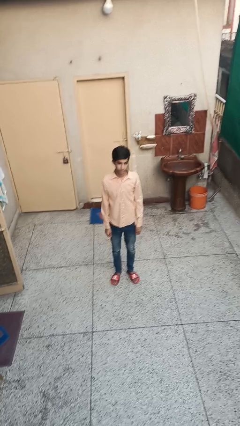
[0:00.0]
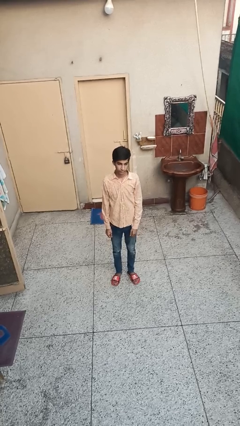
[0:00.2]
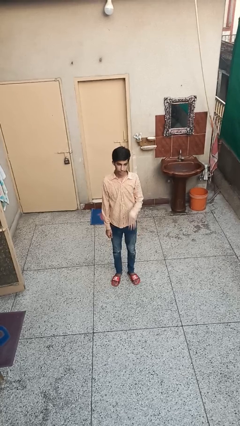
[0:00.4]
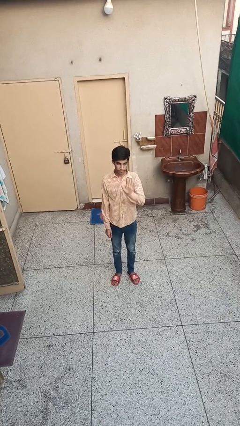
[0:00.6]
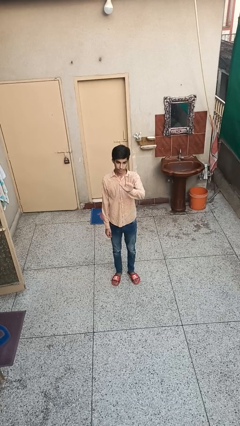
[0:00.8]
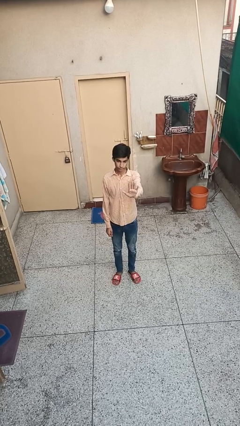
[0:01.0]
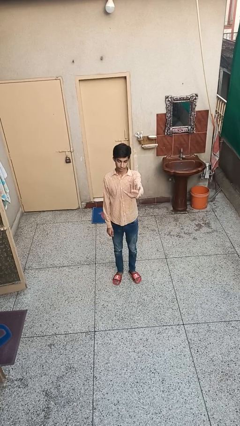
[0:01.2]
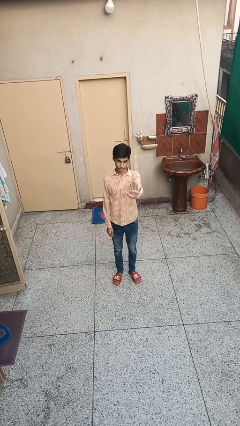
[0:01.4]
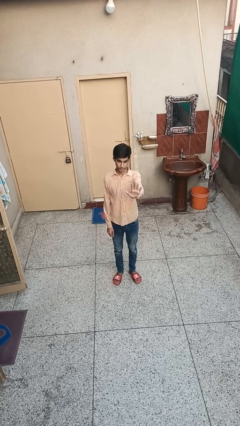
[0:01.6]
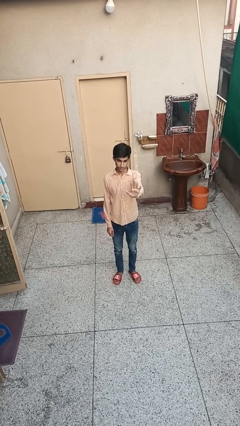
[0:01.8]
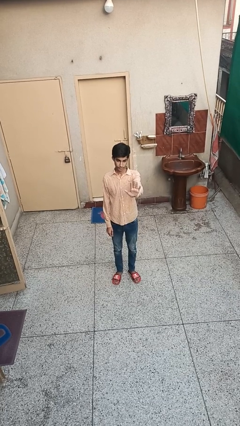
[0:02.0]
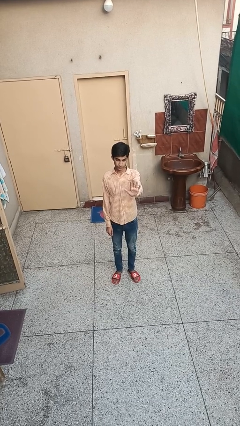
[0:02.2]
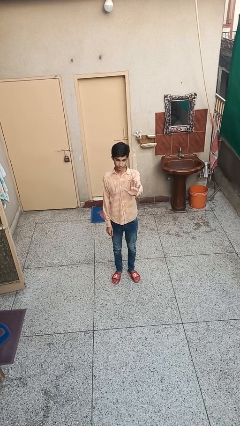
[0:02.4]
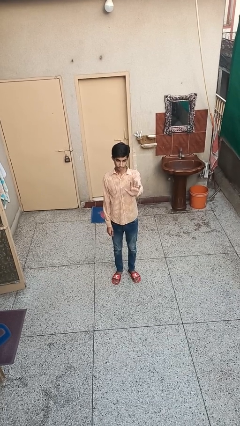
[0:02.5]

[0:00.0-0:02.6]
person gestures number five

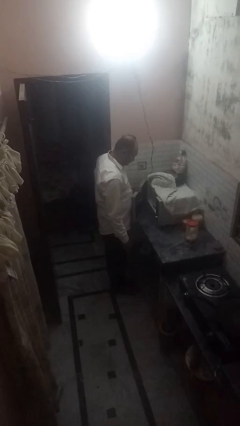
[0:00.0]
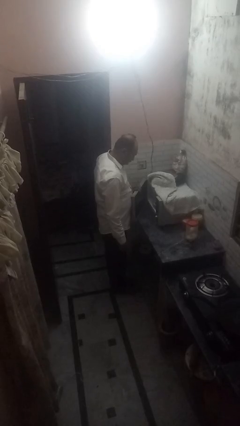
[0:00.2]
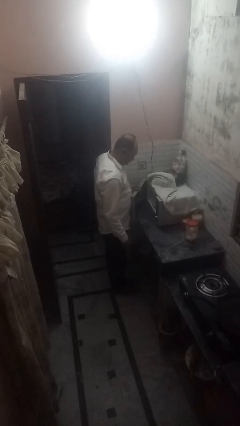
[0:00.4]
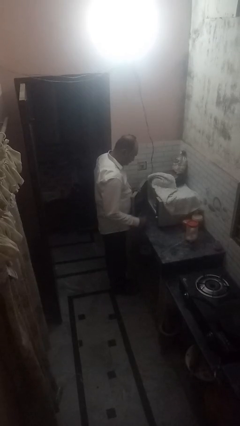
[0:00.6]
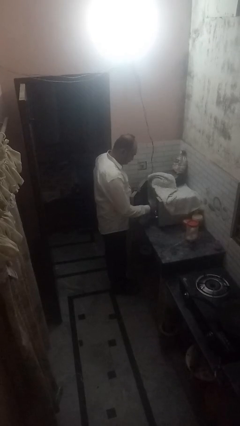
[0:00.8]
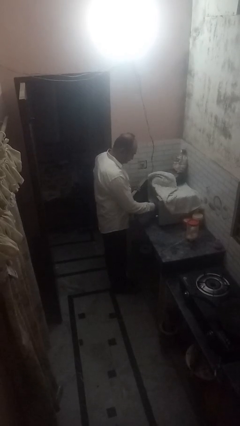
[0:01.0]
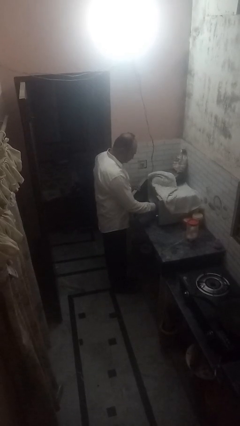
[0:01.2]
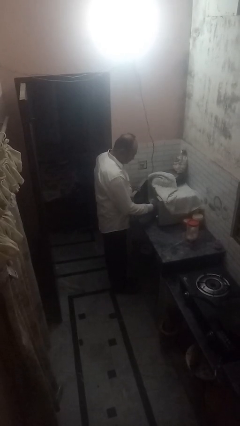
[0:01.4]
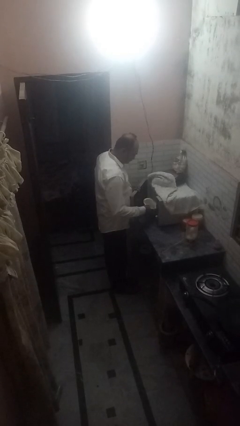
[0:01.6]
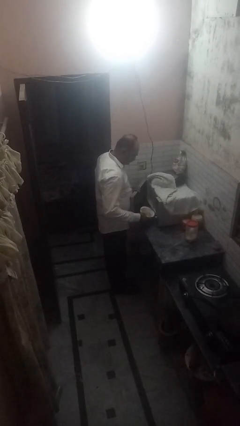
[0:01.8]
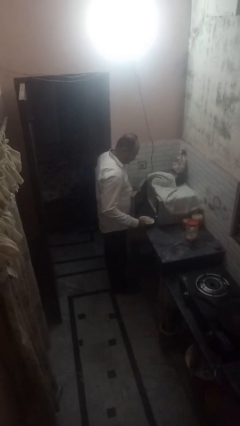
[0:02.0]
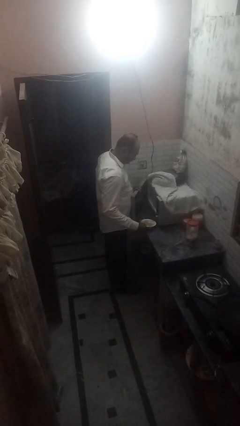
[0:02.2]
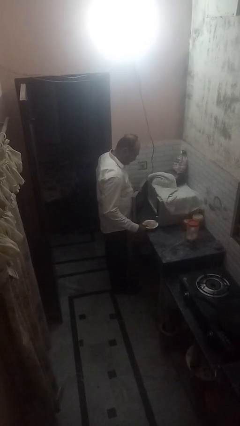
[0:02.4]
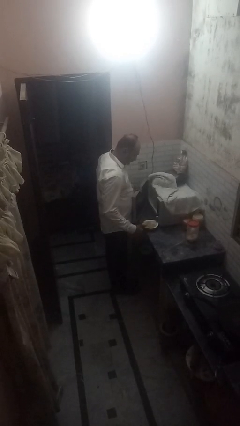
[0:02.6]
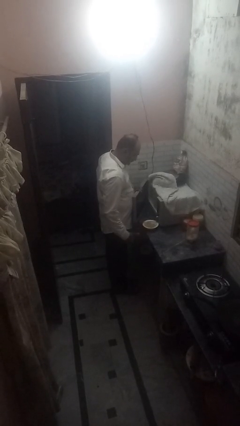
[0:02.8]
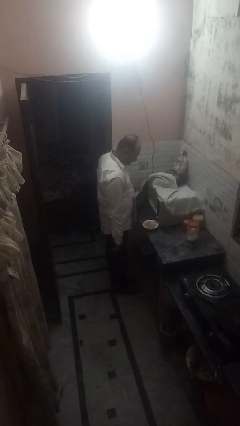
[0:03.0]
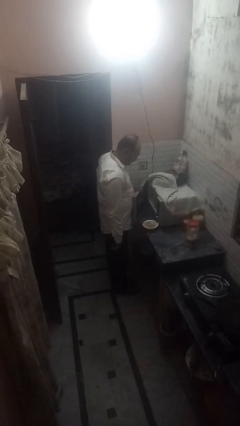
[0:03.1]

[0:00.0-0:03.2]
person takes object from microwave

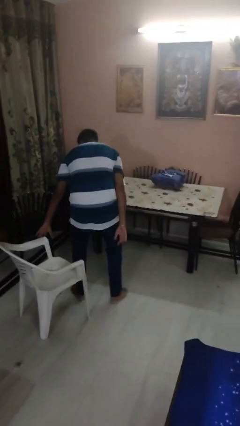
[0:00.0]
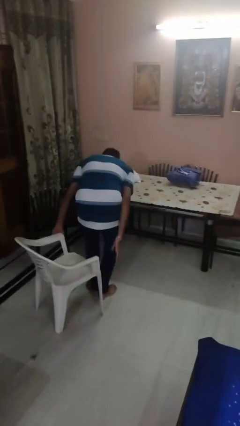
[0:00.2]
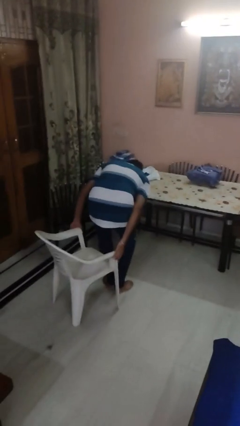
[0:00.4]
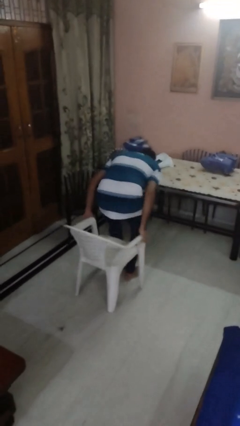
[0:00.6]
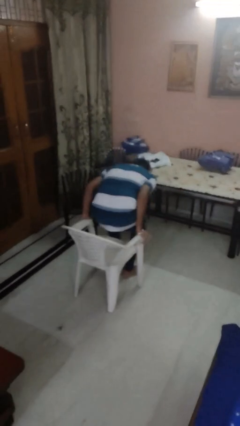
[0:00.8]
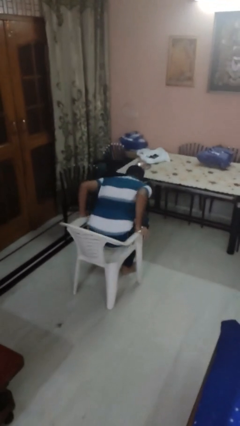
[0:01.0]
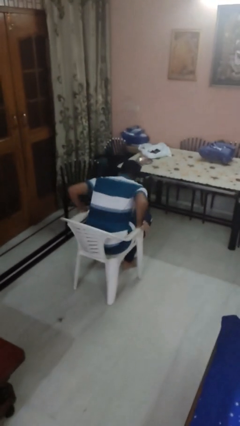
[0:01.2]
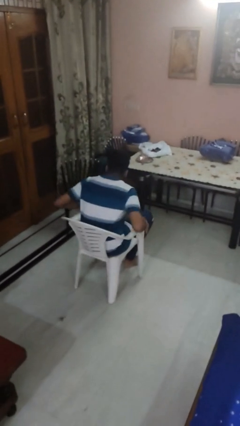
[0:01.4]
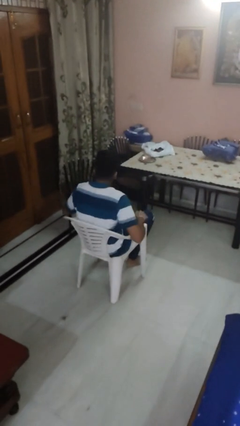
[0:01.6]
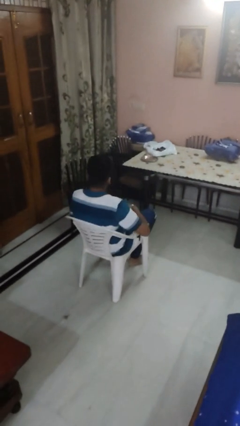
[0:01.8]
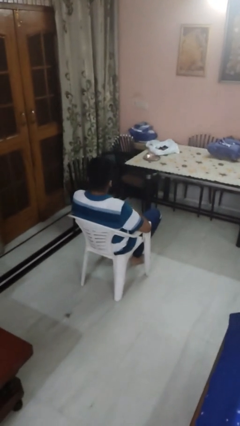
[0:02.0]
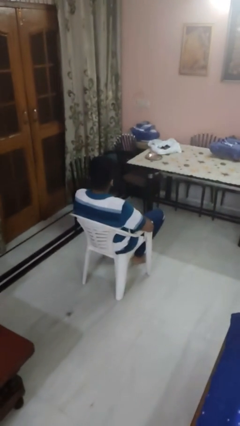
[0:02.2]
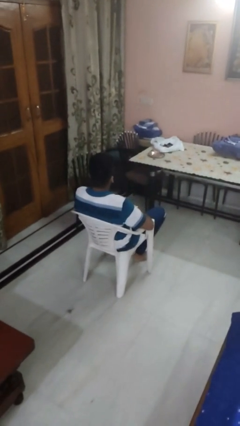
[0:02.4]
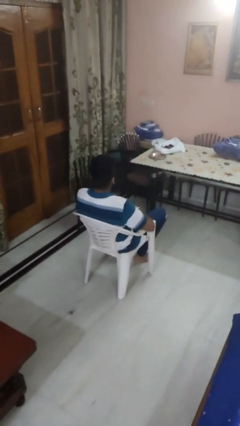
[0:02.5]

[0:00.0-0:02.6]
person sits down

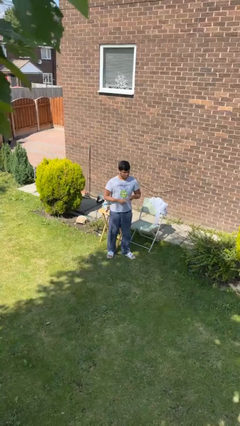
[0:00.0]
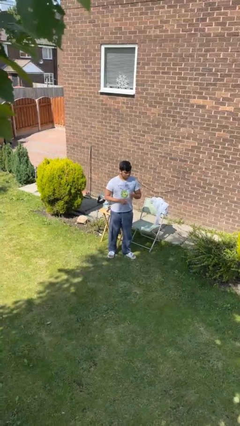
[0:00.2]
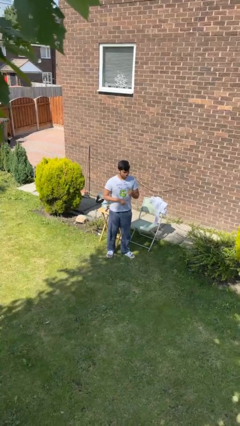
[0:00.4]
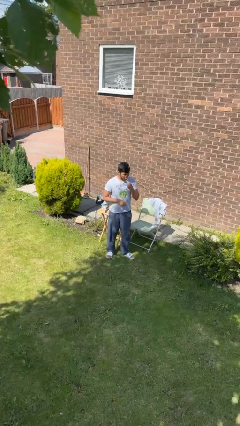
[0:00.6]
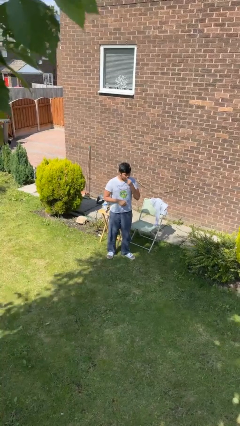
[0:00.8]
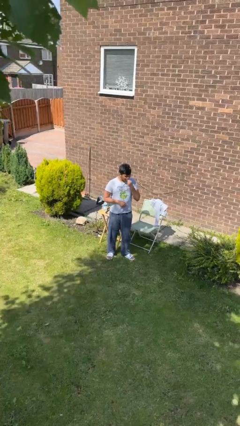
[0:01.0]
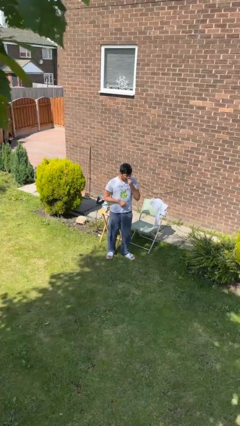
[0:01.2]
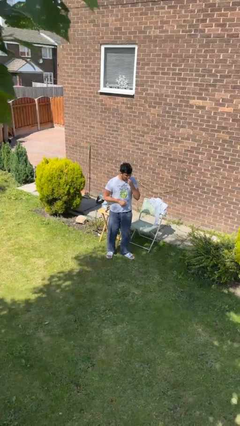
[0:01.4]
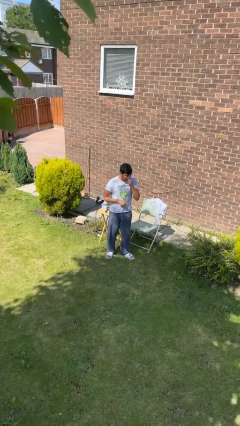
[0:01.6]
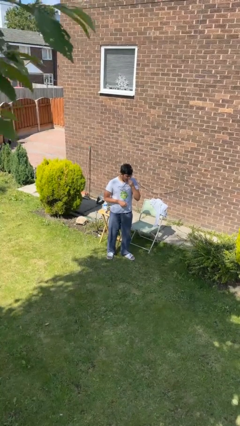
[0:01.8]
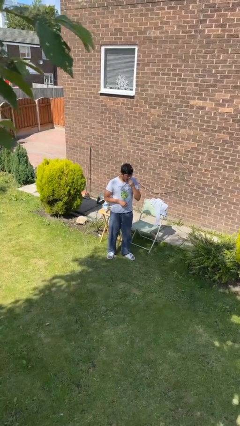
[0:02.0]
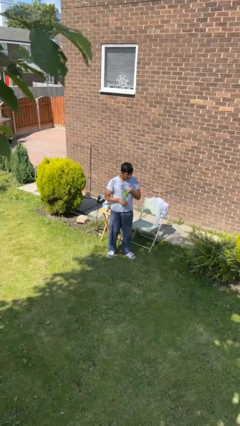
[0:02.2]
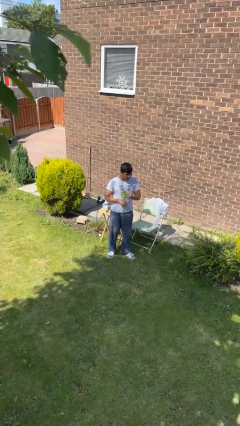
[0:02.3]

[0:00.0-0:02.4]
person flosses

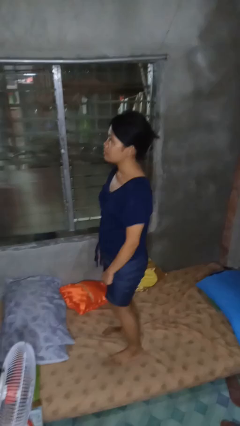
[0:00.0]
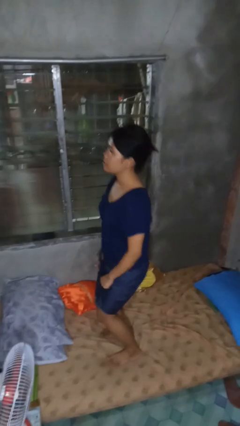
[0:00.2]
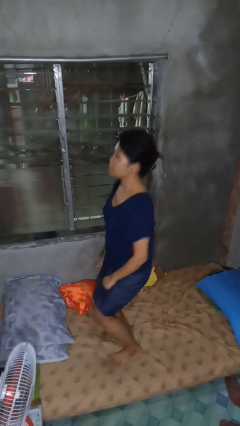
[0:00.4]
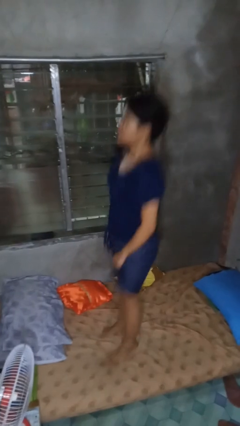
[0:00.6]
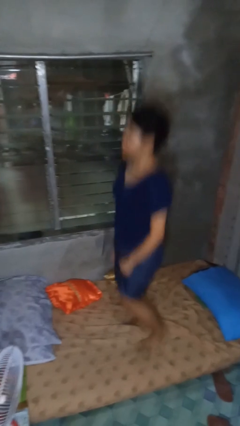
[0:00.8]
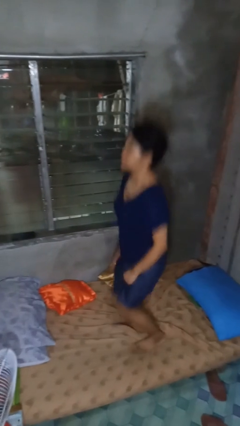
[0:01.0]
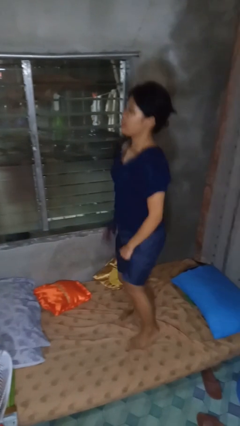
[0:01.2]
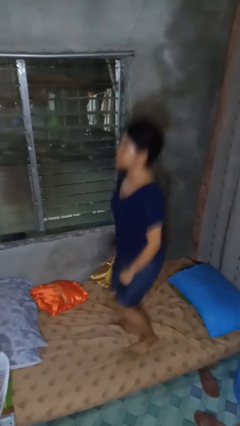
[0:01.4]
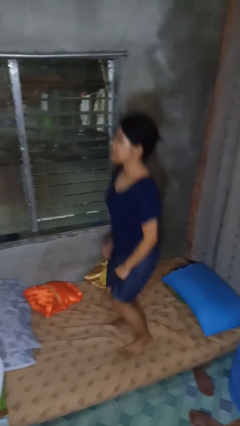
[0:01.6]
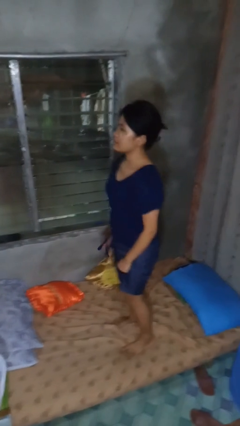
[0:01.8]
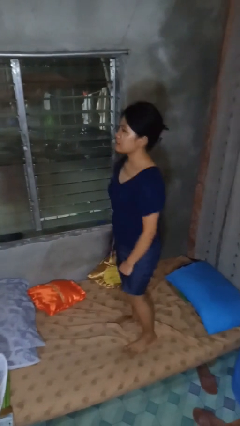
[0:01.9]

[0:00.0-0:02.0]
person jumps on bed

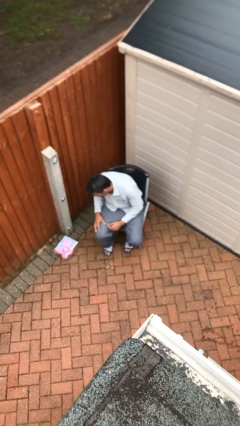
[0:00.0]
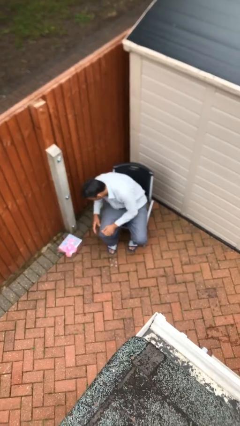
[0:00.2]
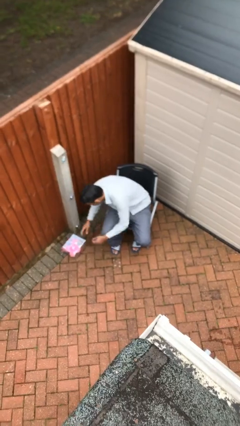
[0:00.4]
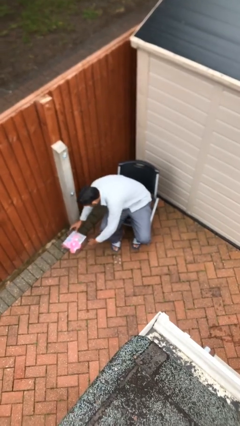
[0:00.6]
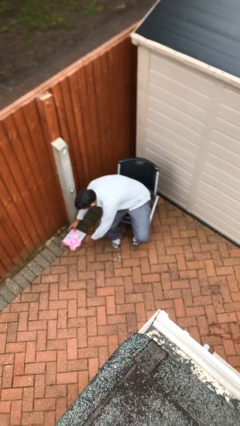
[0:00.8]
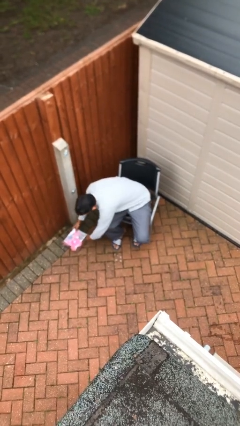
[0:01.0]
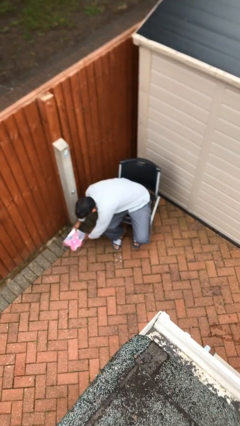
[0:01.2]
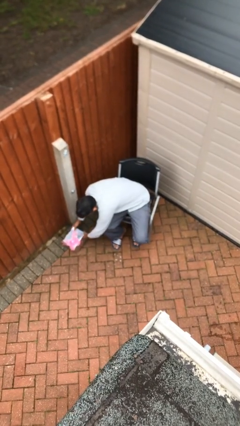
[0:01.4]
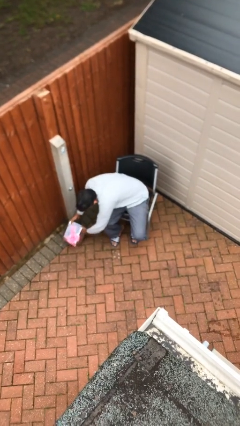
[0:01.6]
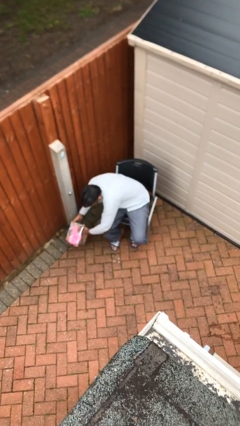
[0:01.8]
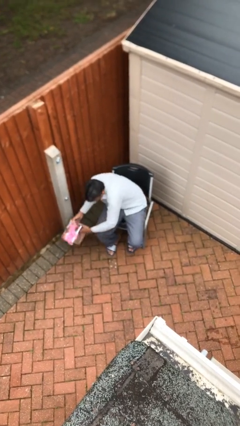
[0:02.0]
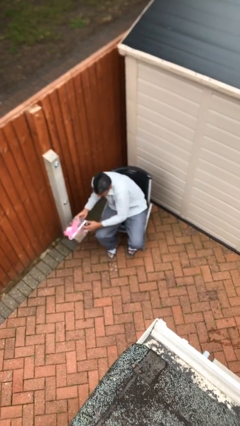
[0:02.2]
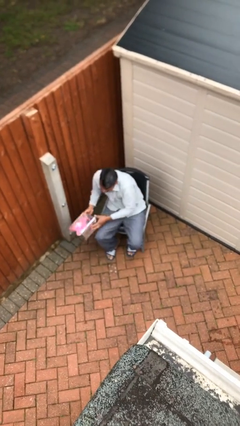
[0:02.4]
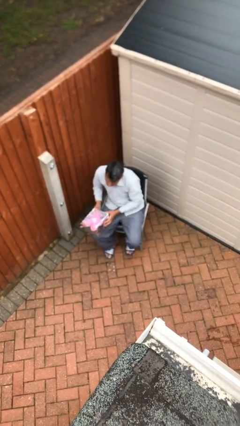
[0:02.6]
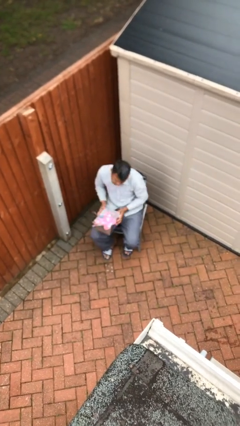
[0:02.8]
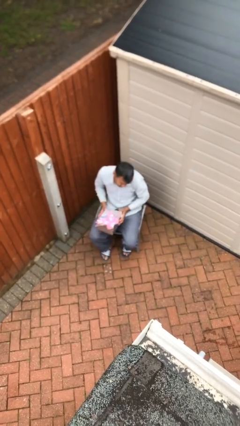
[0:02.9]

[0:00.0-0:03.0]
person picks up object from floor

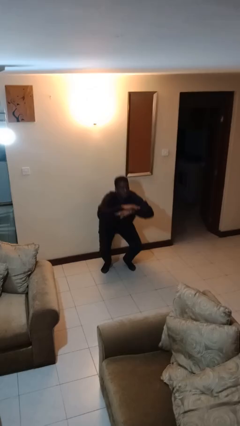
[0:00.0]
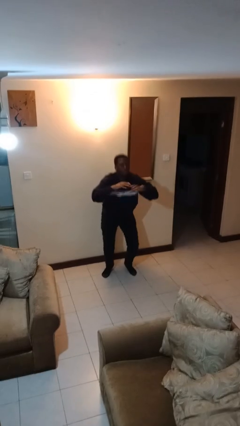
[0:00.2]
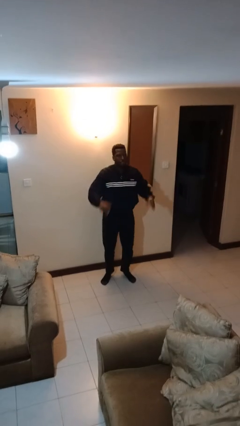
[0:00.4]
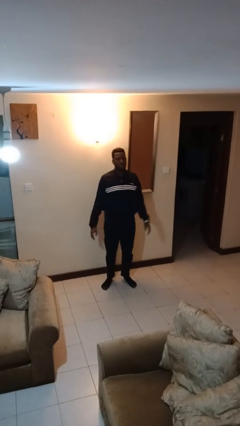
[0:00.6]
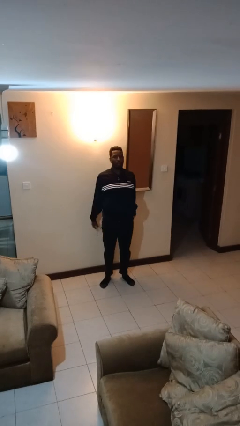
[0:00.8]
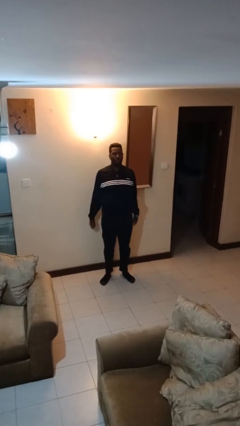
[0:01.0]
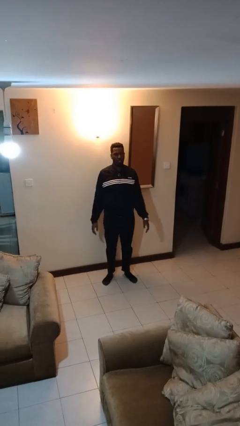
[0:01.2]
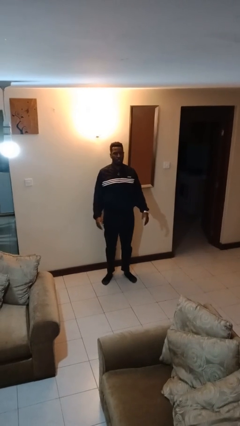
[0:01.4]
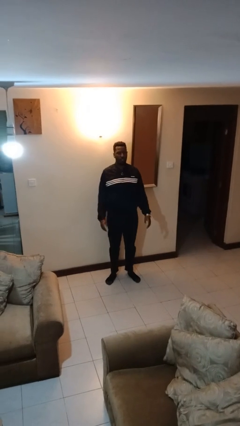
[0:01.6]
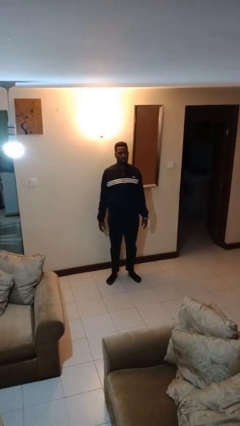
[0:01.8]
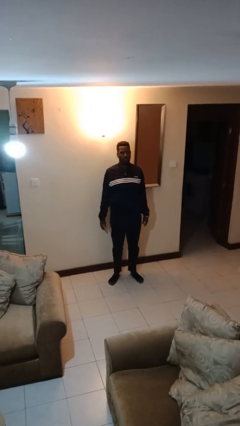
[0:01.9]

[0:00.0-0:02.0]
person stands up
